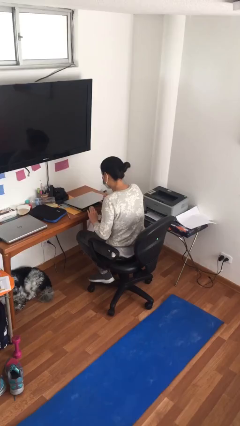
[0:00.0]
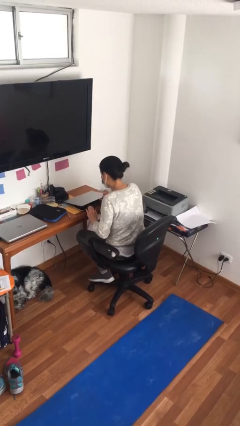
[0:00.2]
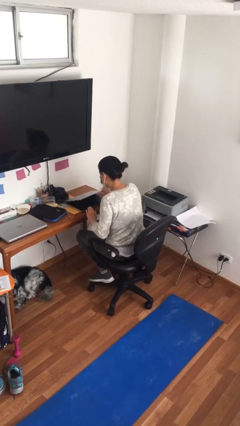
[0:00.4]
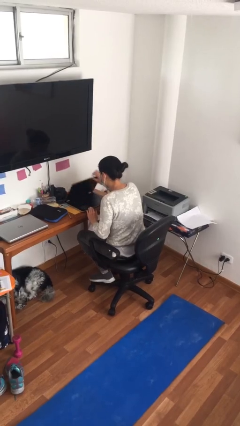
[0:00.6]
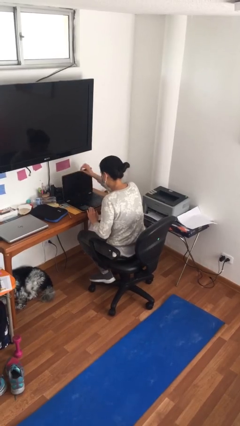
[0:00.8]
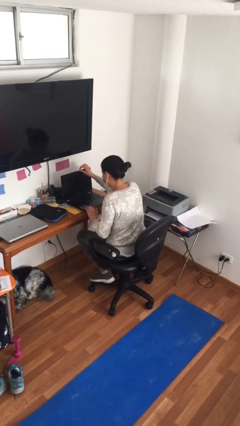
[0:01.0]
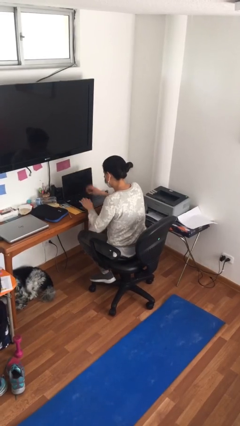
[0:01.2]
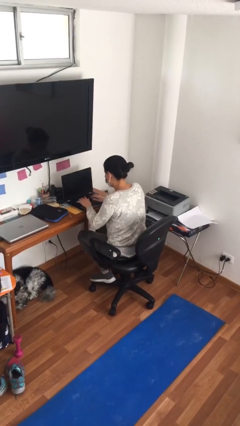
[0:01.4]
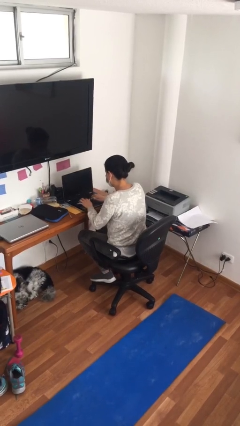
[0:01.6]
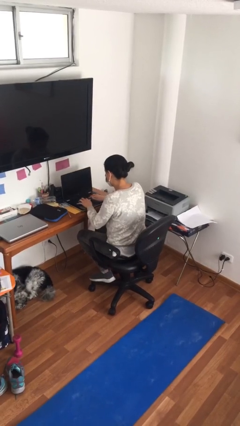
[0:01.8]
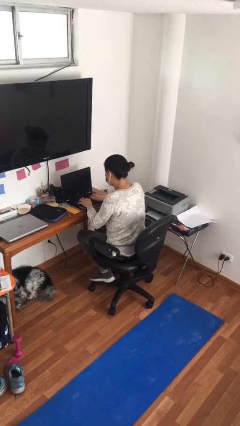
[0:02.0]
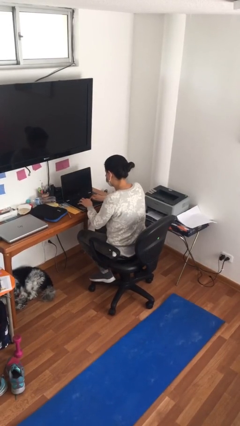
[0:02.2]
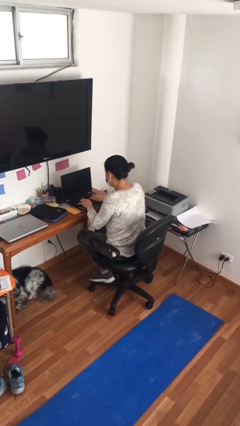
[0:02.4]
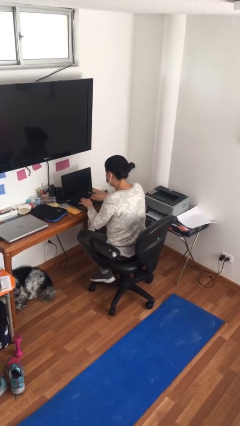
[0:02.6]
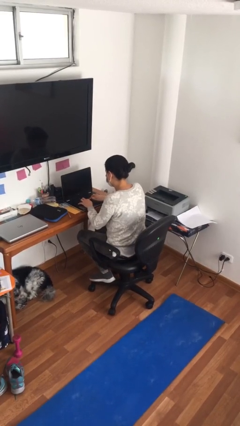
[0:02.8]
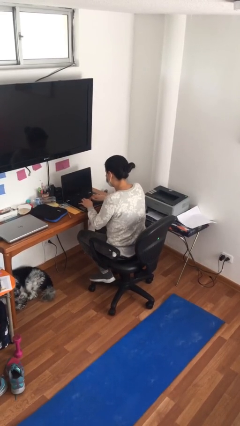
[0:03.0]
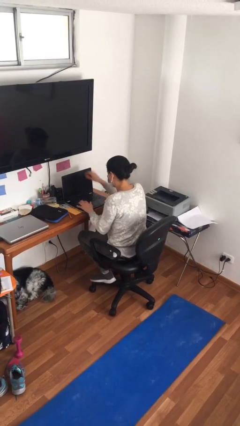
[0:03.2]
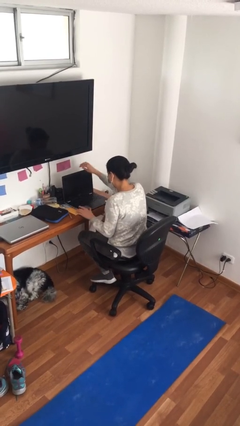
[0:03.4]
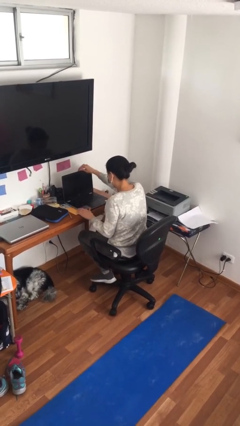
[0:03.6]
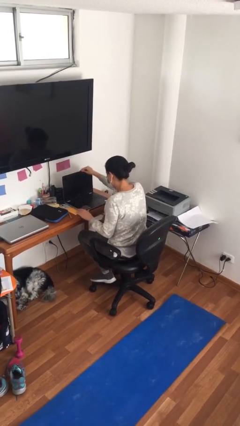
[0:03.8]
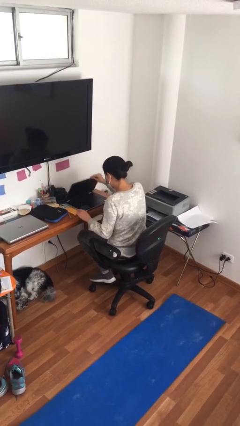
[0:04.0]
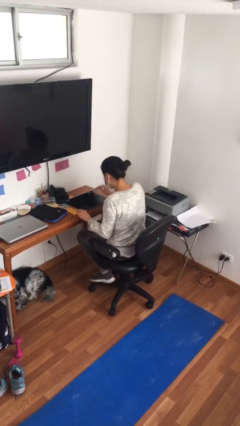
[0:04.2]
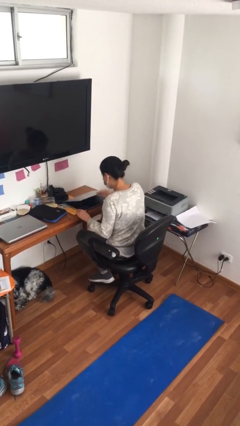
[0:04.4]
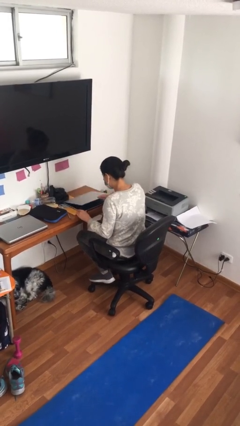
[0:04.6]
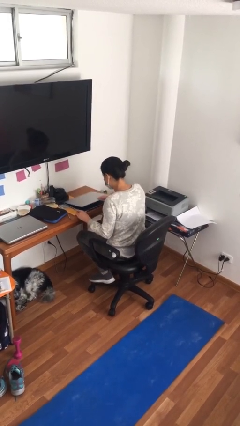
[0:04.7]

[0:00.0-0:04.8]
person interacts with laptop

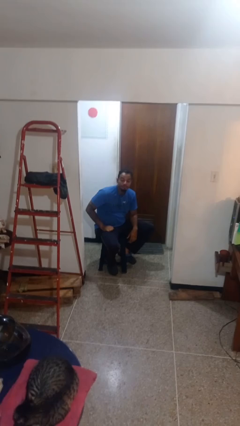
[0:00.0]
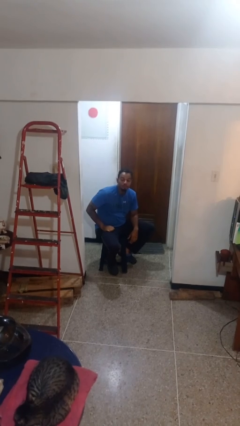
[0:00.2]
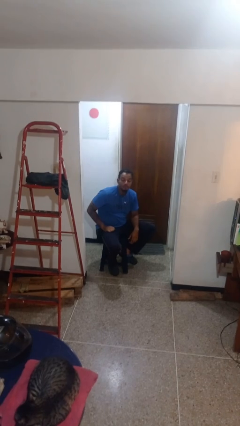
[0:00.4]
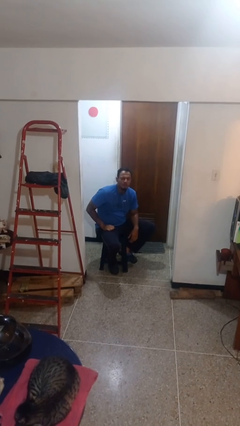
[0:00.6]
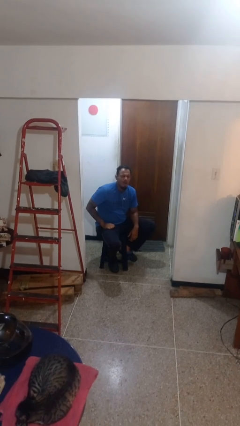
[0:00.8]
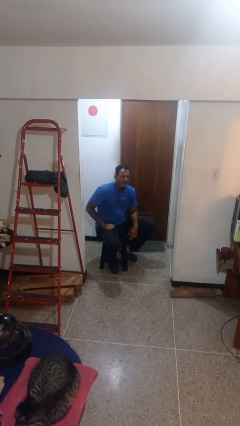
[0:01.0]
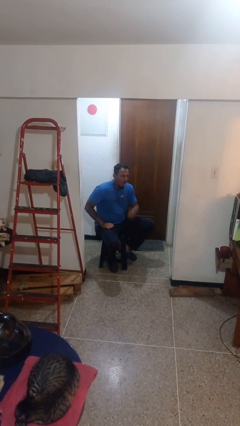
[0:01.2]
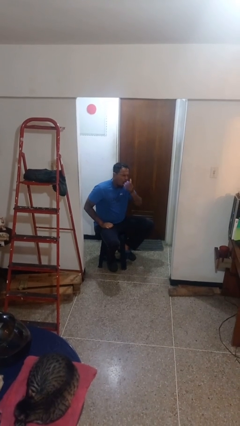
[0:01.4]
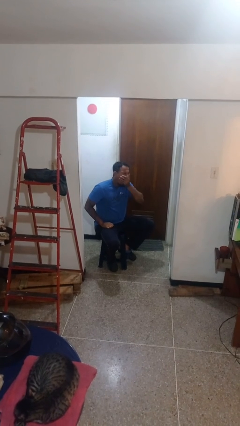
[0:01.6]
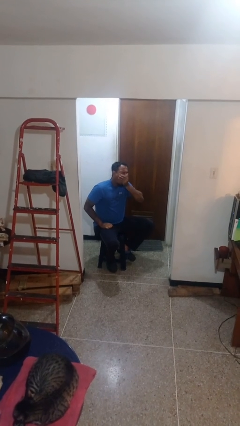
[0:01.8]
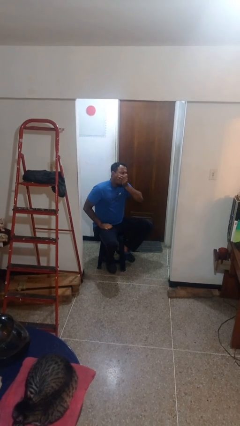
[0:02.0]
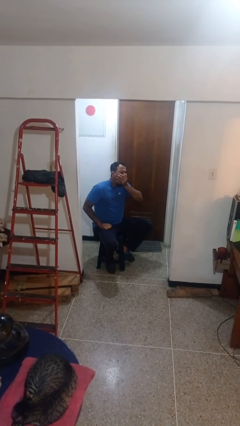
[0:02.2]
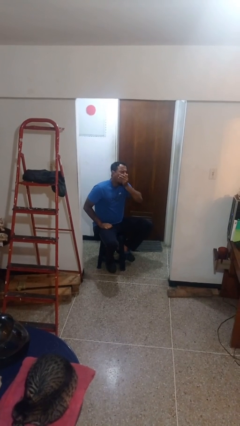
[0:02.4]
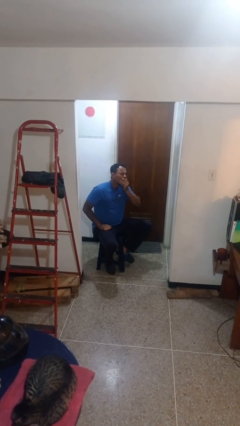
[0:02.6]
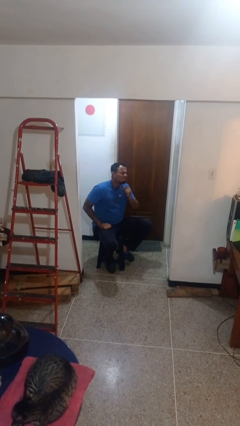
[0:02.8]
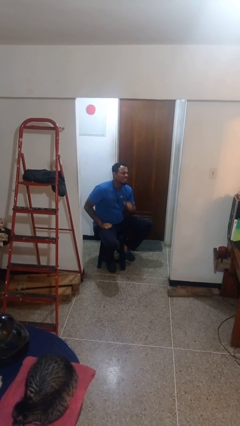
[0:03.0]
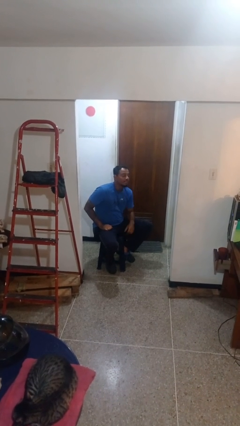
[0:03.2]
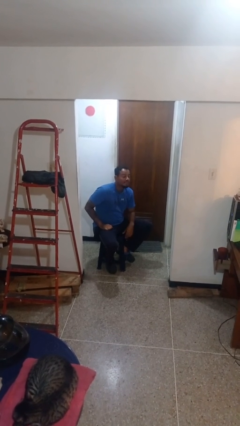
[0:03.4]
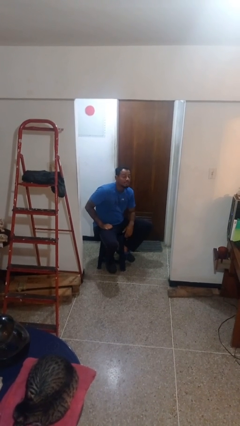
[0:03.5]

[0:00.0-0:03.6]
person yawns

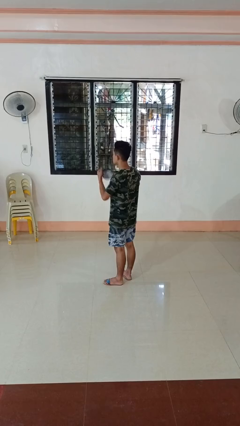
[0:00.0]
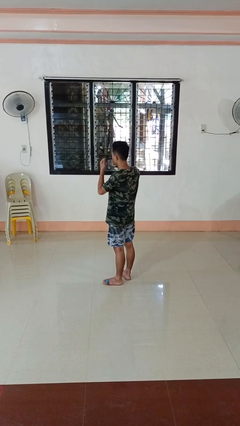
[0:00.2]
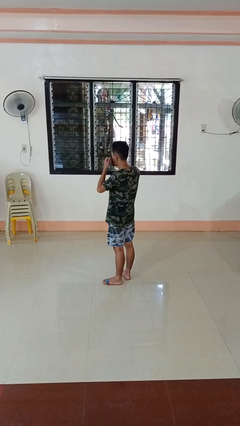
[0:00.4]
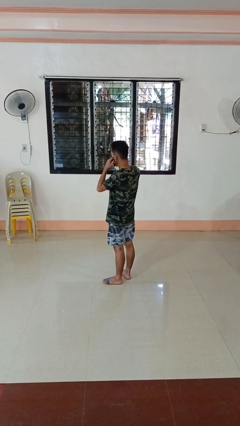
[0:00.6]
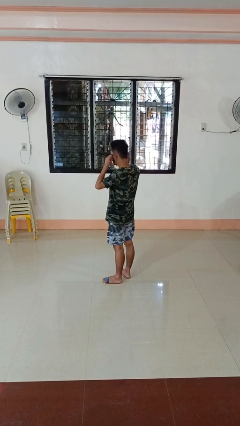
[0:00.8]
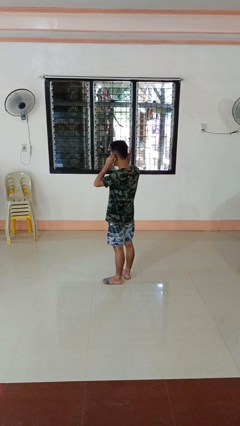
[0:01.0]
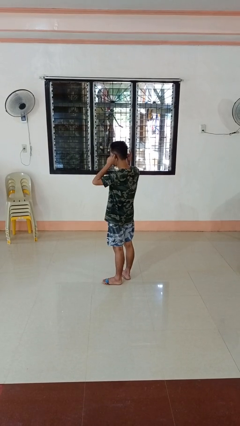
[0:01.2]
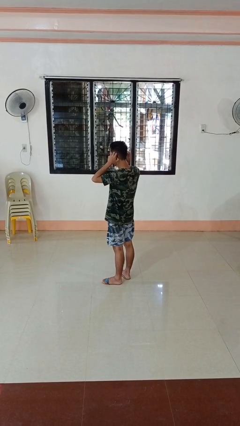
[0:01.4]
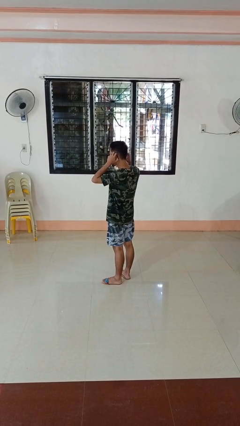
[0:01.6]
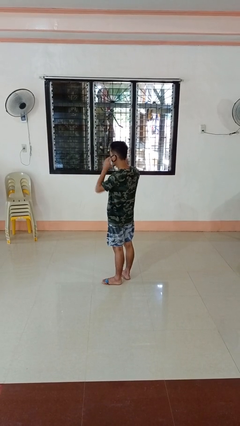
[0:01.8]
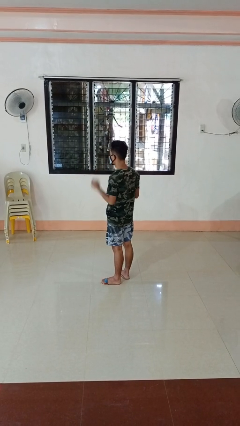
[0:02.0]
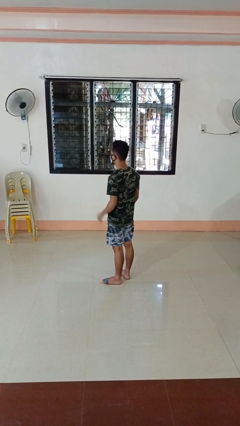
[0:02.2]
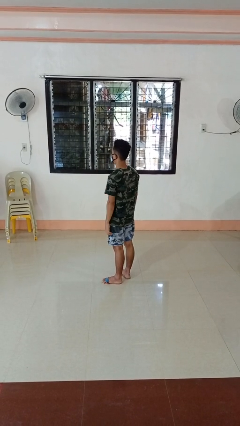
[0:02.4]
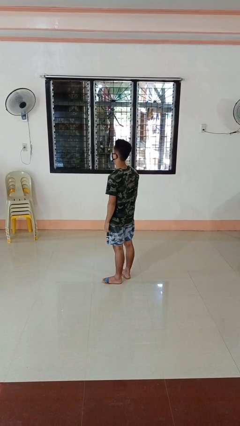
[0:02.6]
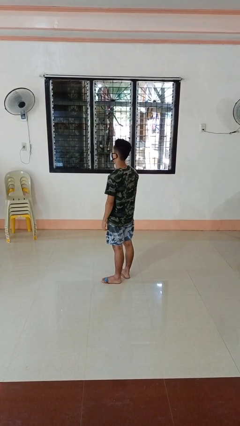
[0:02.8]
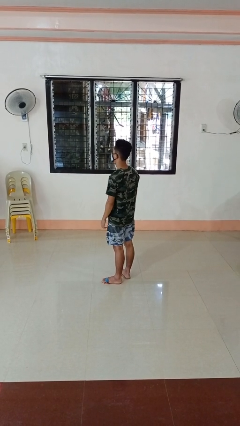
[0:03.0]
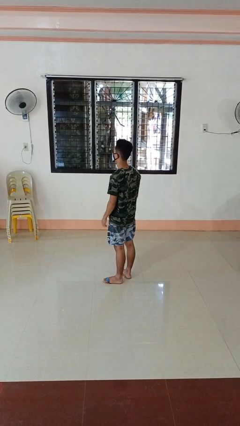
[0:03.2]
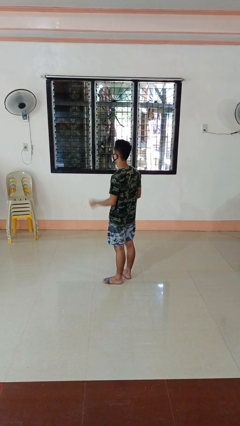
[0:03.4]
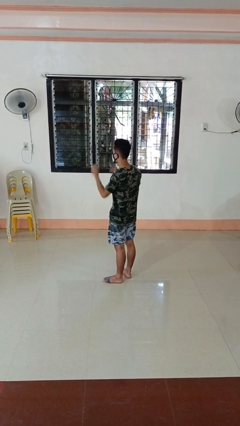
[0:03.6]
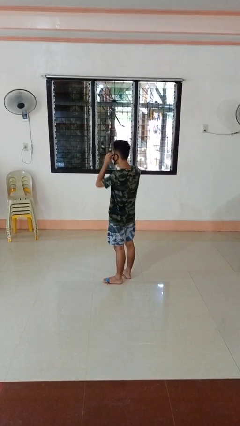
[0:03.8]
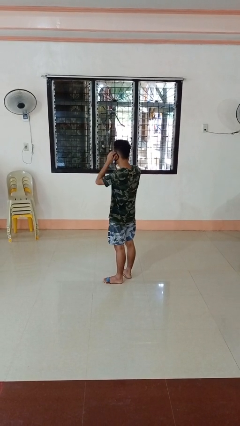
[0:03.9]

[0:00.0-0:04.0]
person puts on facemask

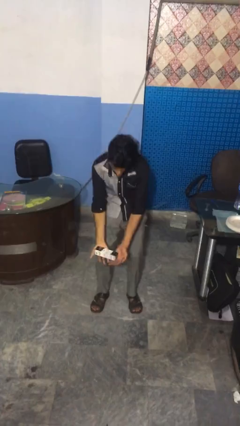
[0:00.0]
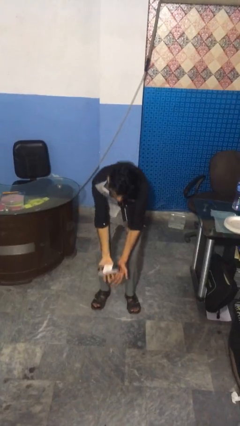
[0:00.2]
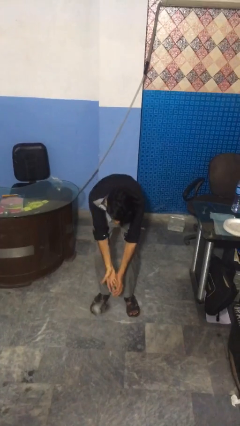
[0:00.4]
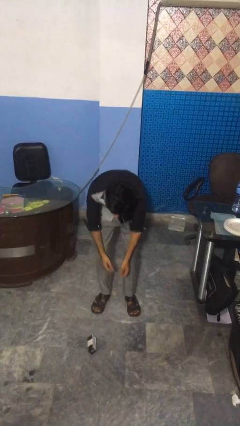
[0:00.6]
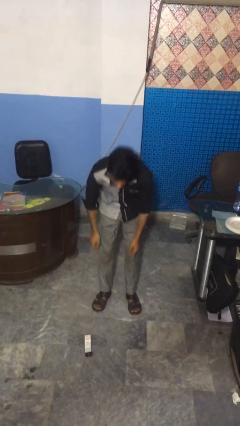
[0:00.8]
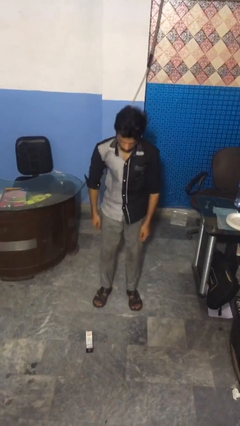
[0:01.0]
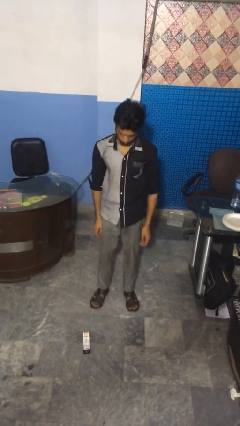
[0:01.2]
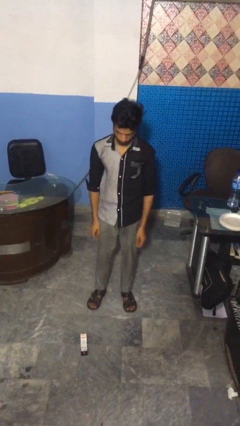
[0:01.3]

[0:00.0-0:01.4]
person catches dropped object

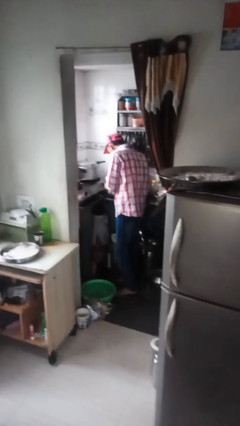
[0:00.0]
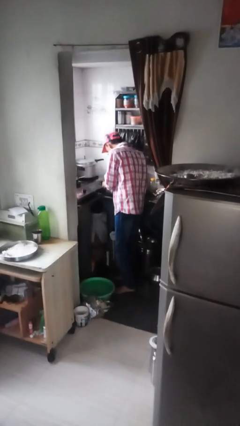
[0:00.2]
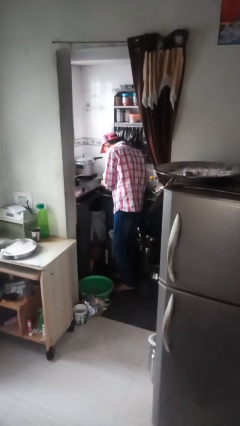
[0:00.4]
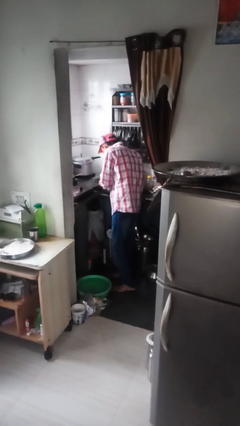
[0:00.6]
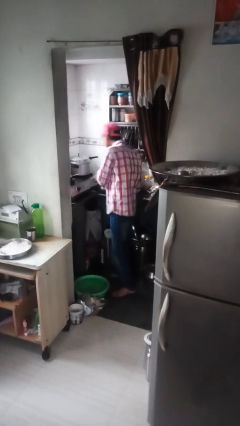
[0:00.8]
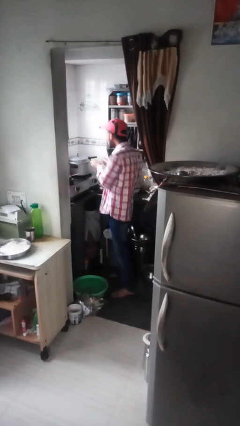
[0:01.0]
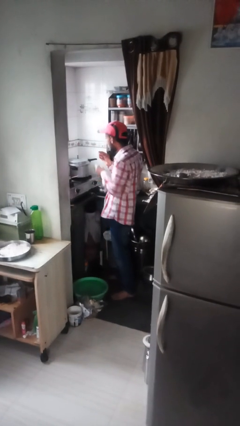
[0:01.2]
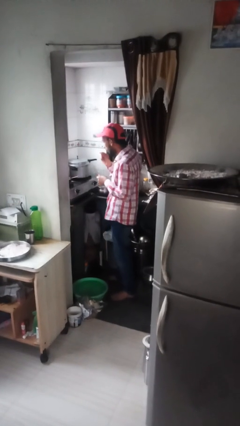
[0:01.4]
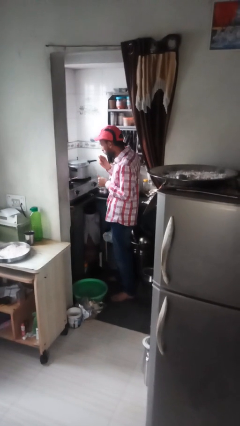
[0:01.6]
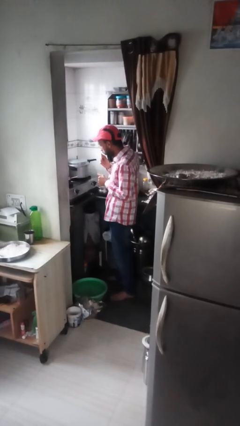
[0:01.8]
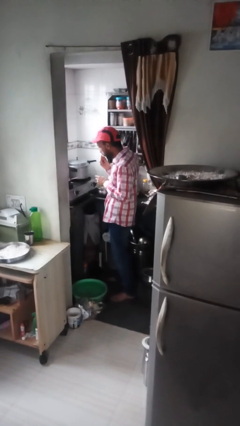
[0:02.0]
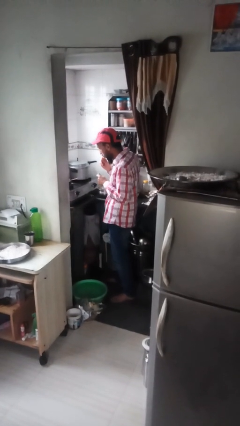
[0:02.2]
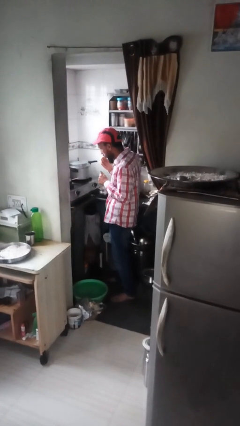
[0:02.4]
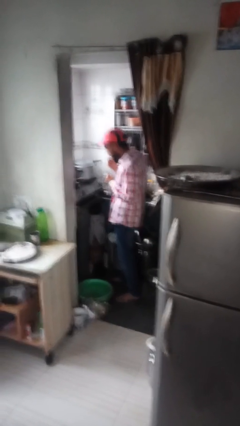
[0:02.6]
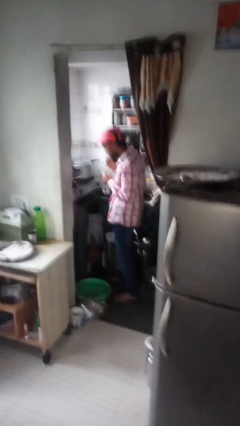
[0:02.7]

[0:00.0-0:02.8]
person burns hand

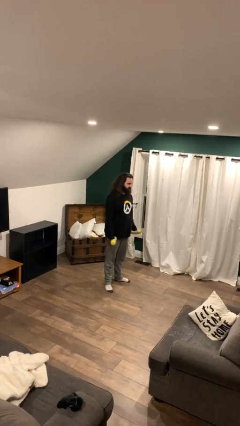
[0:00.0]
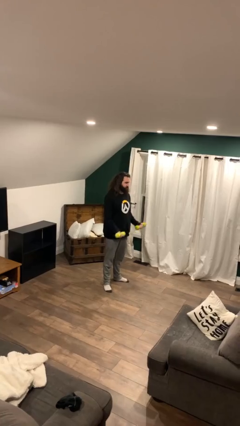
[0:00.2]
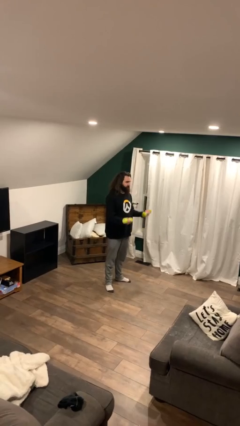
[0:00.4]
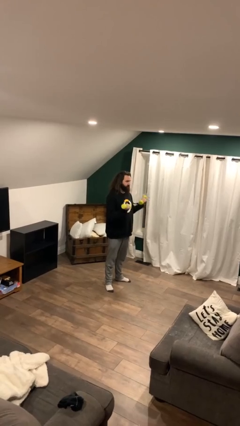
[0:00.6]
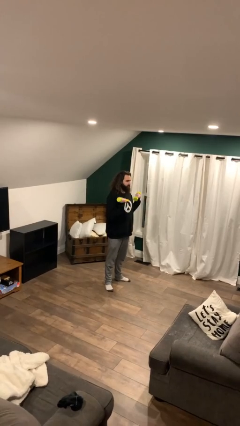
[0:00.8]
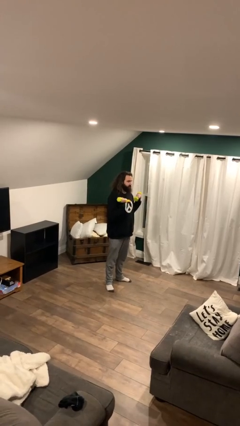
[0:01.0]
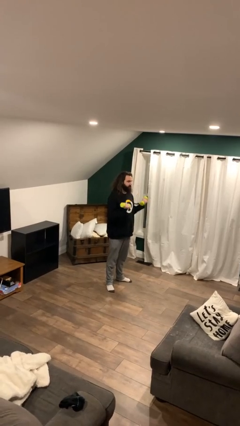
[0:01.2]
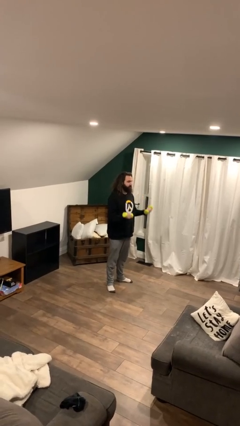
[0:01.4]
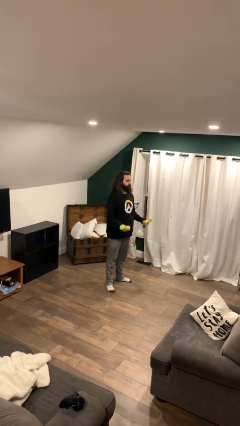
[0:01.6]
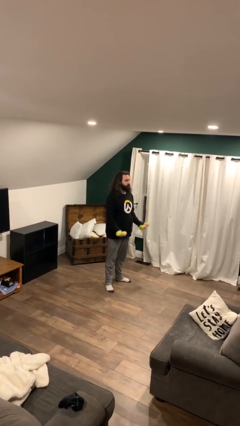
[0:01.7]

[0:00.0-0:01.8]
person lifts dumbbells
